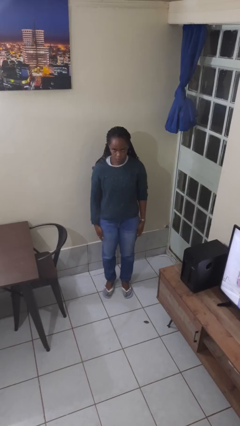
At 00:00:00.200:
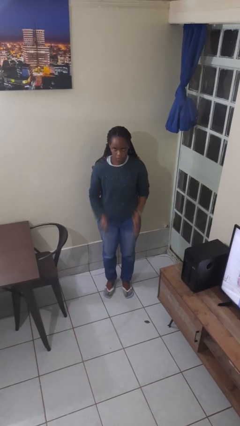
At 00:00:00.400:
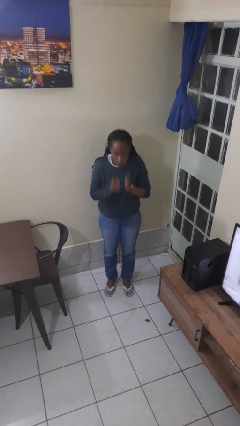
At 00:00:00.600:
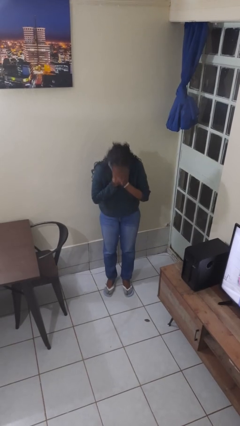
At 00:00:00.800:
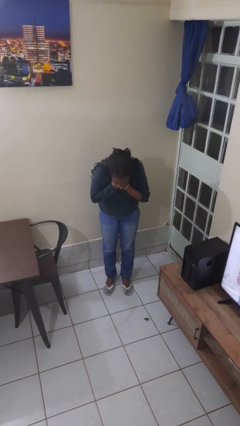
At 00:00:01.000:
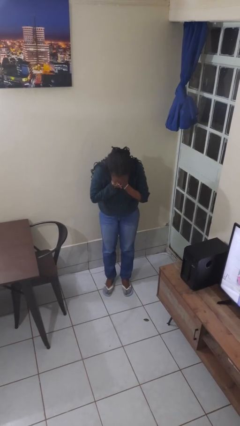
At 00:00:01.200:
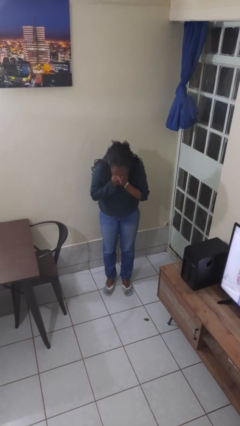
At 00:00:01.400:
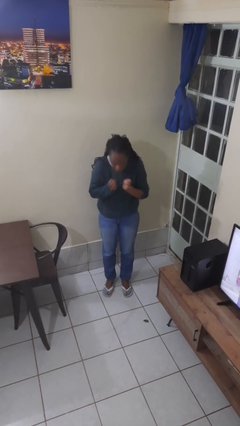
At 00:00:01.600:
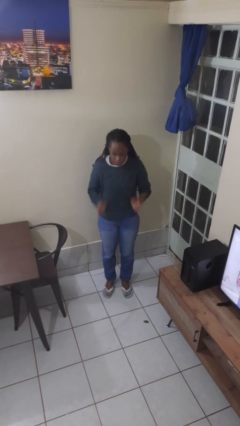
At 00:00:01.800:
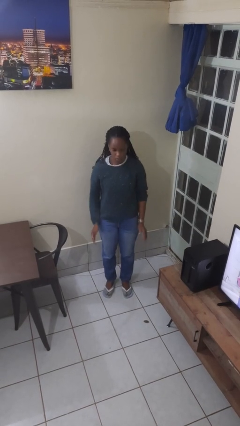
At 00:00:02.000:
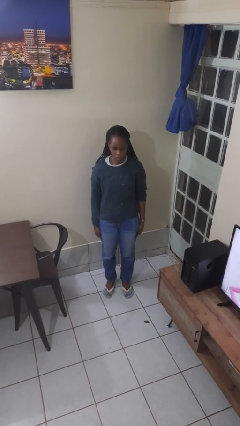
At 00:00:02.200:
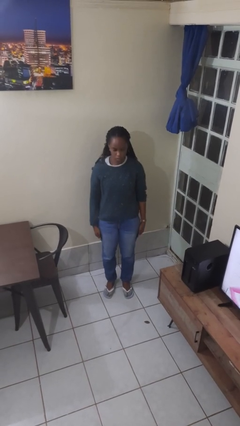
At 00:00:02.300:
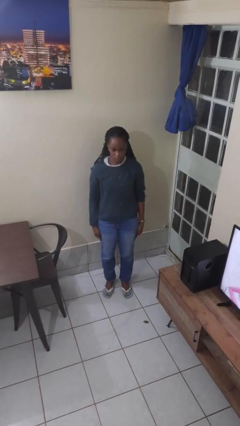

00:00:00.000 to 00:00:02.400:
person sneezes into hand

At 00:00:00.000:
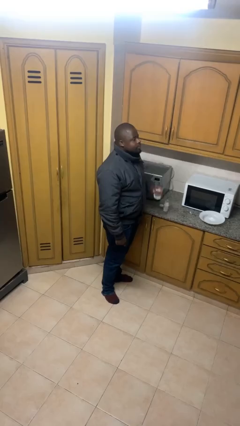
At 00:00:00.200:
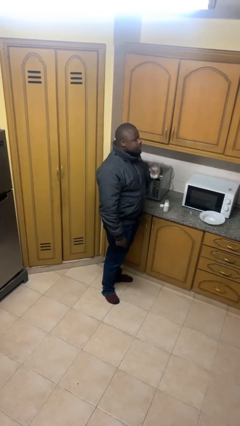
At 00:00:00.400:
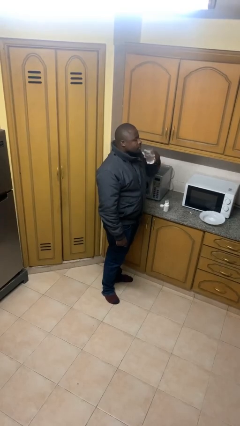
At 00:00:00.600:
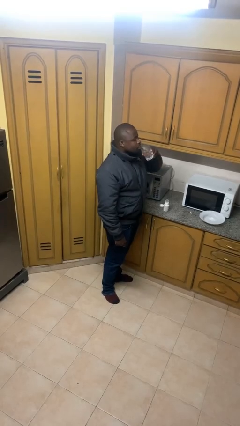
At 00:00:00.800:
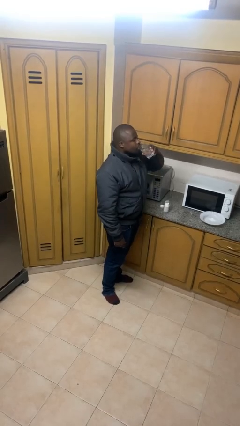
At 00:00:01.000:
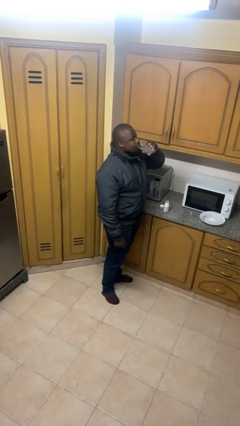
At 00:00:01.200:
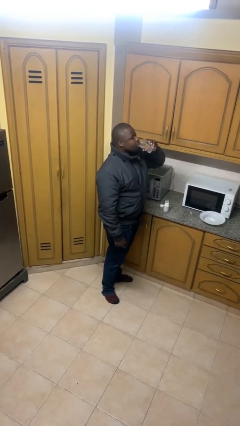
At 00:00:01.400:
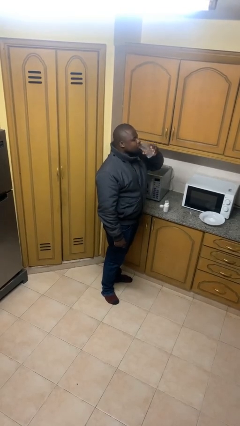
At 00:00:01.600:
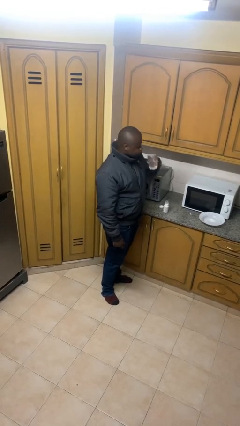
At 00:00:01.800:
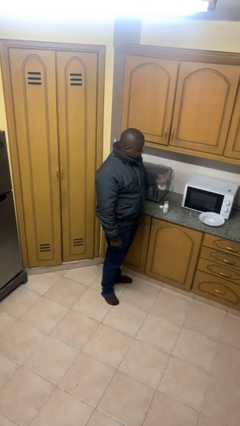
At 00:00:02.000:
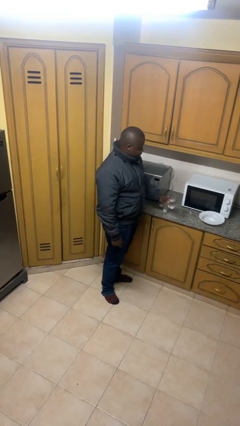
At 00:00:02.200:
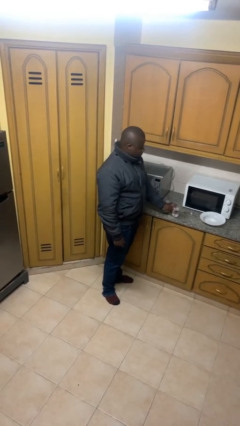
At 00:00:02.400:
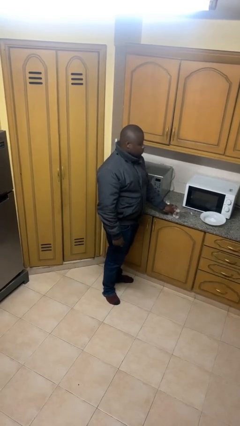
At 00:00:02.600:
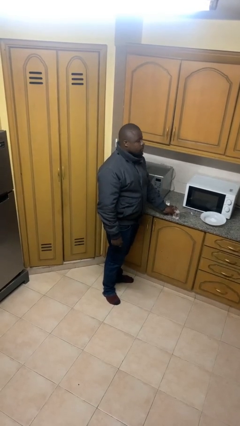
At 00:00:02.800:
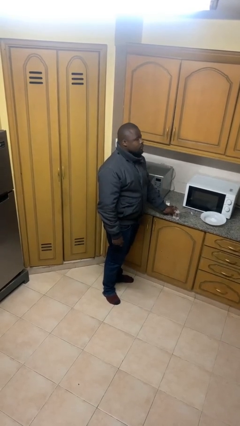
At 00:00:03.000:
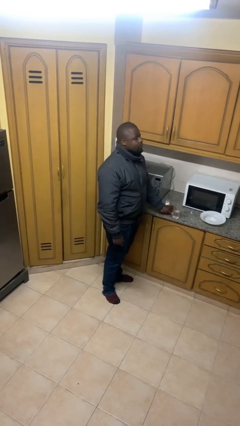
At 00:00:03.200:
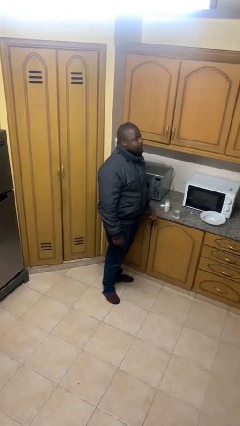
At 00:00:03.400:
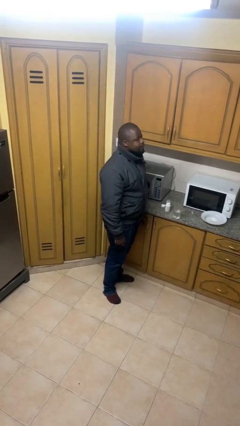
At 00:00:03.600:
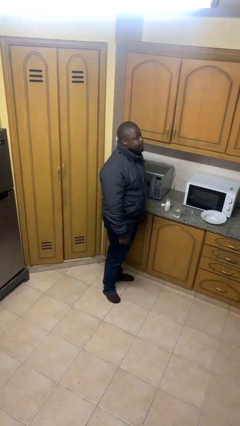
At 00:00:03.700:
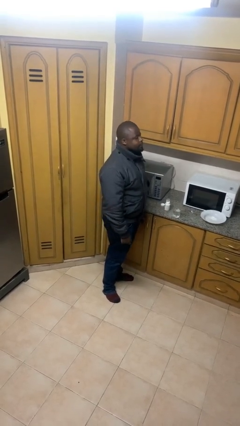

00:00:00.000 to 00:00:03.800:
person drinks from cup

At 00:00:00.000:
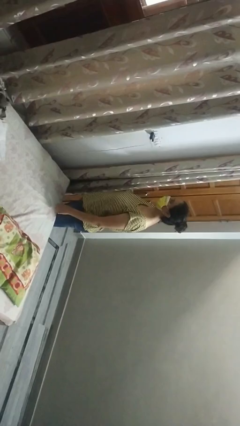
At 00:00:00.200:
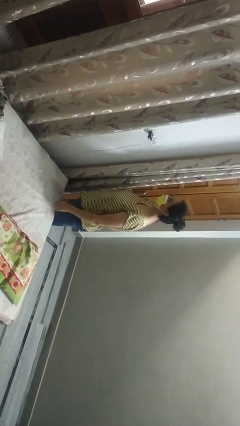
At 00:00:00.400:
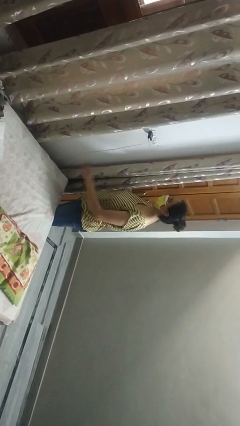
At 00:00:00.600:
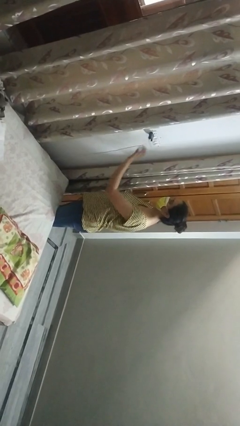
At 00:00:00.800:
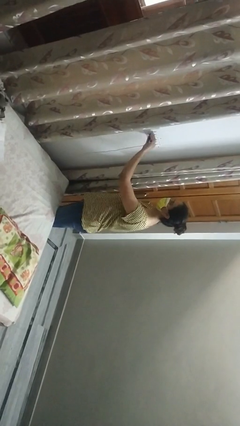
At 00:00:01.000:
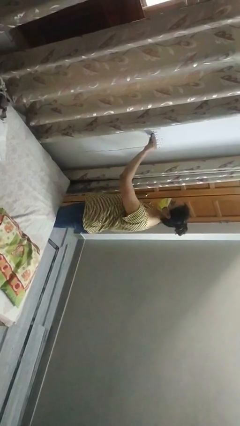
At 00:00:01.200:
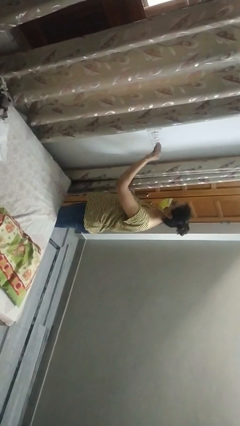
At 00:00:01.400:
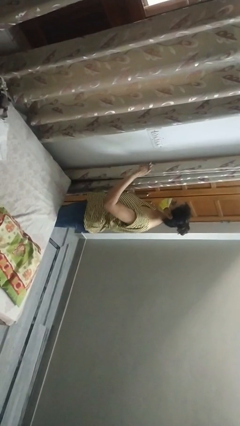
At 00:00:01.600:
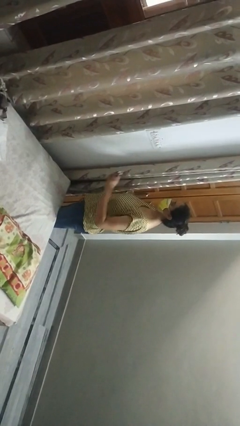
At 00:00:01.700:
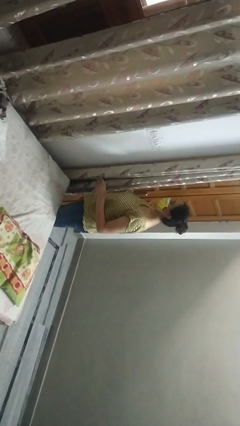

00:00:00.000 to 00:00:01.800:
person unplugs from electrical socket

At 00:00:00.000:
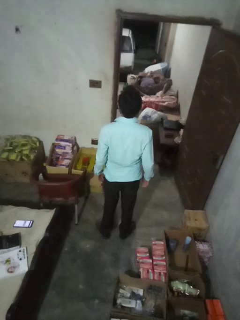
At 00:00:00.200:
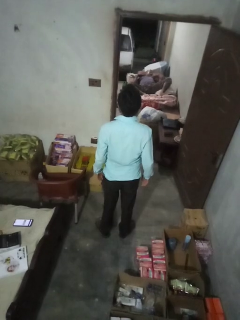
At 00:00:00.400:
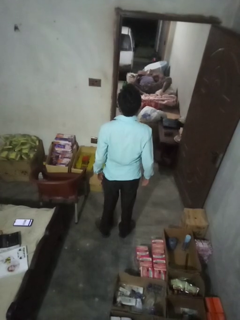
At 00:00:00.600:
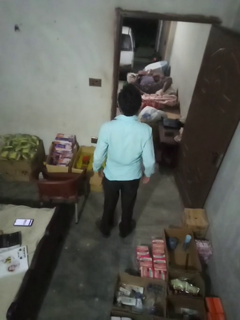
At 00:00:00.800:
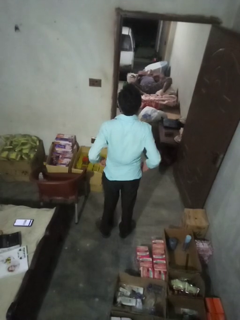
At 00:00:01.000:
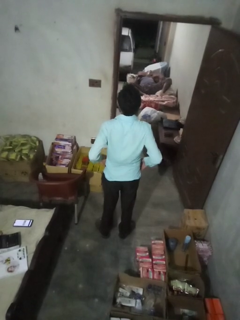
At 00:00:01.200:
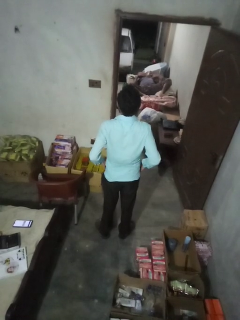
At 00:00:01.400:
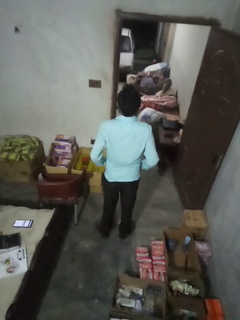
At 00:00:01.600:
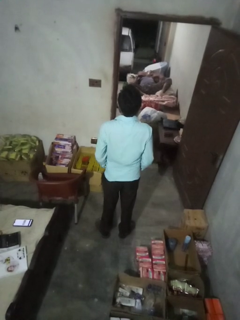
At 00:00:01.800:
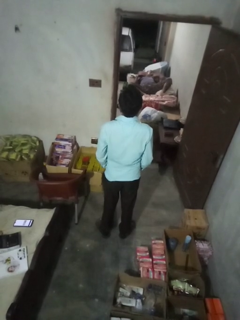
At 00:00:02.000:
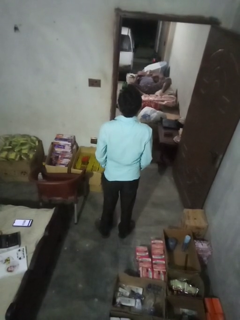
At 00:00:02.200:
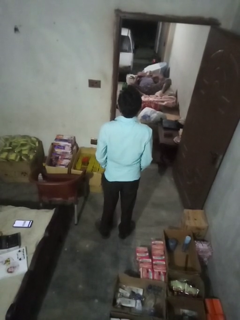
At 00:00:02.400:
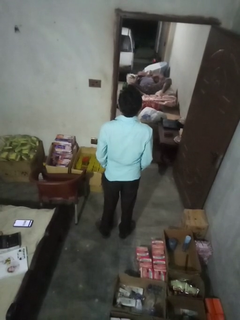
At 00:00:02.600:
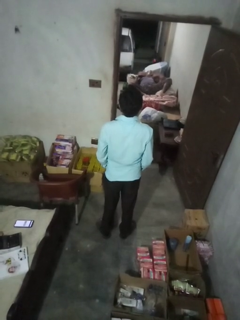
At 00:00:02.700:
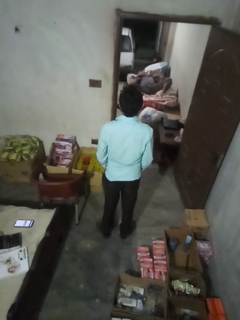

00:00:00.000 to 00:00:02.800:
person puts hands in back pockets

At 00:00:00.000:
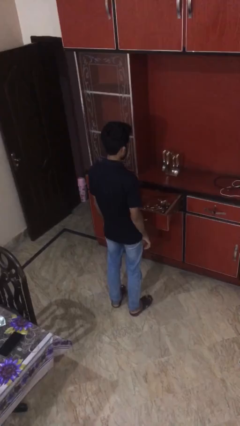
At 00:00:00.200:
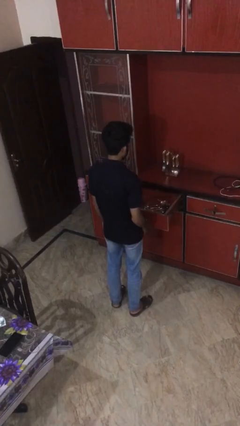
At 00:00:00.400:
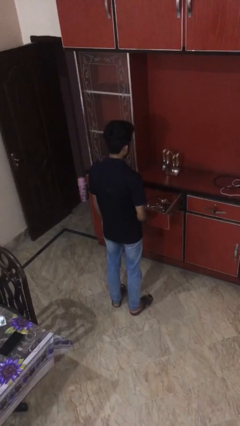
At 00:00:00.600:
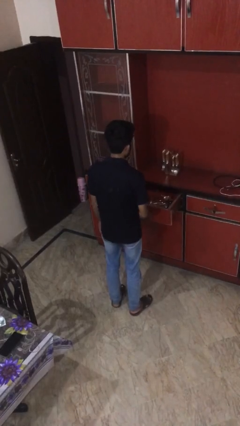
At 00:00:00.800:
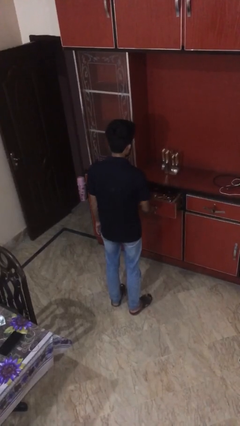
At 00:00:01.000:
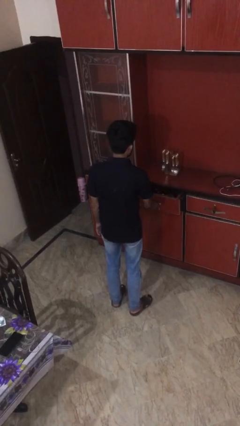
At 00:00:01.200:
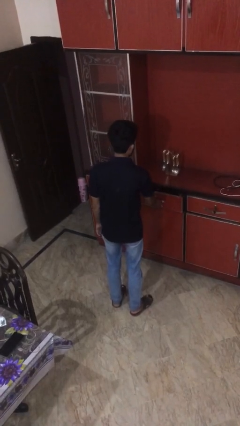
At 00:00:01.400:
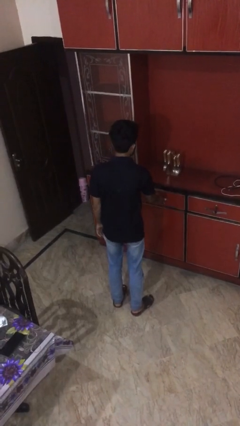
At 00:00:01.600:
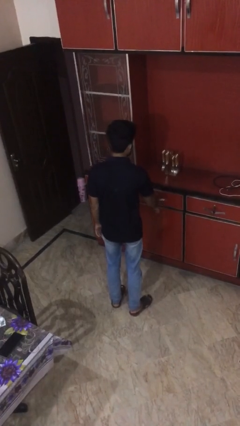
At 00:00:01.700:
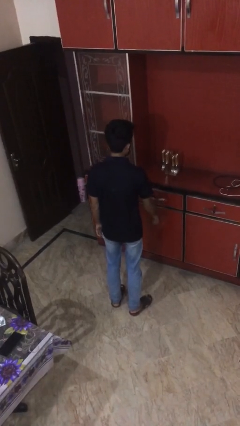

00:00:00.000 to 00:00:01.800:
person closes kitchen drawer

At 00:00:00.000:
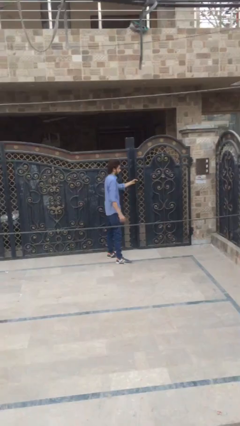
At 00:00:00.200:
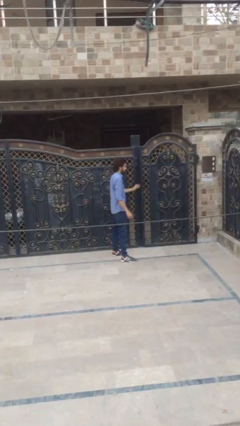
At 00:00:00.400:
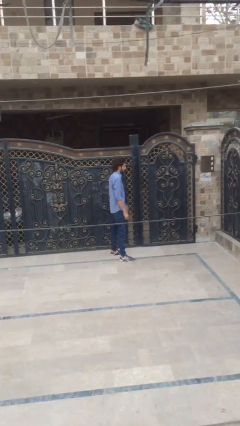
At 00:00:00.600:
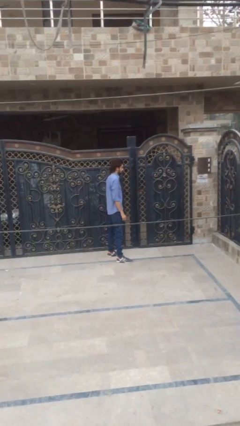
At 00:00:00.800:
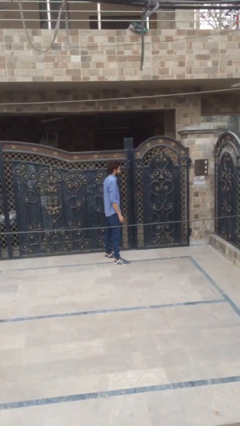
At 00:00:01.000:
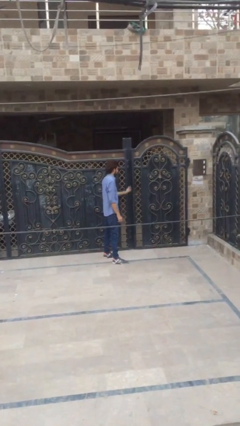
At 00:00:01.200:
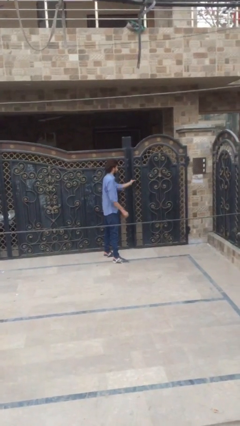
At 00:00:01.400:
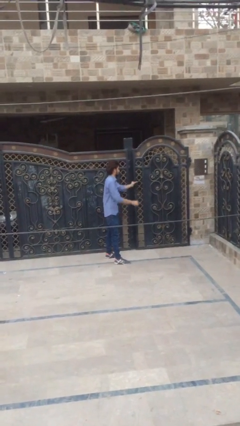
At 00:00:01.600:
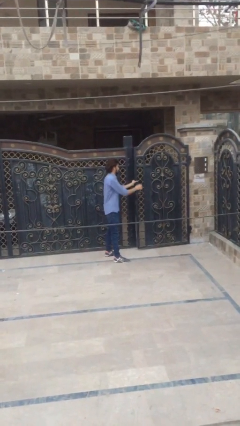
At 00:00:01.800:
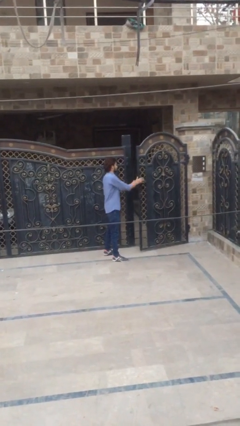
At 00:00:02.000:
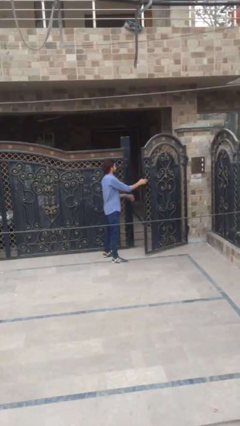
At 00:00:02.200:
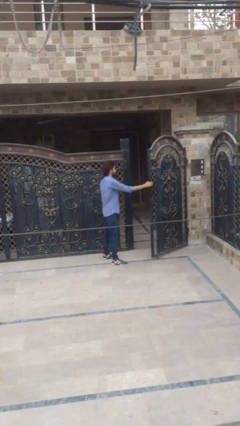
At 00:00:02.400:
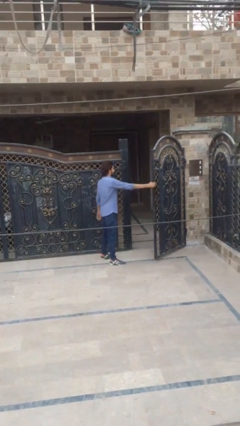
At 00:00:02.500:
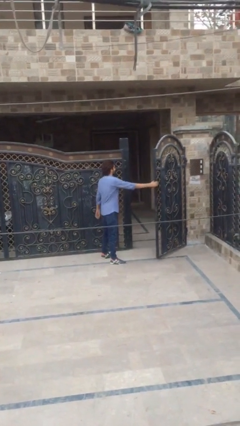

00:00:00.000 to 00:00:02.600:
person opens facility door

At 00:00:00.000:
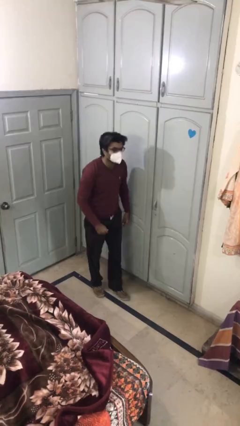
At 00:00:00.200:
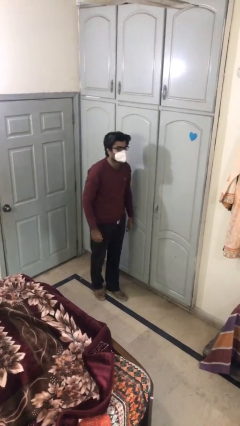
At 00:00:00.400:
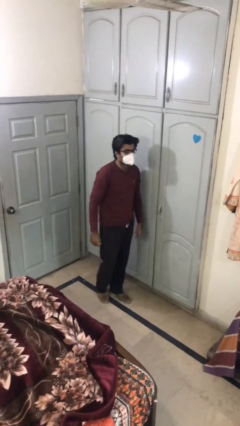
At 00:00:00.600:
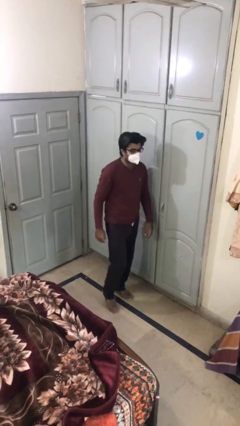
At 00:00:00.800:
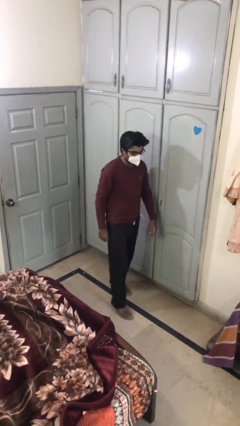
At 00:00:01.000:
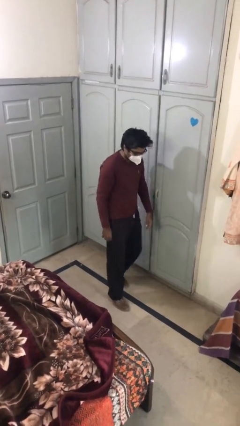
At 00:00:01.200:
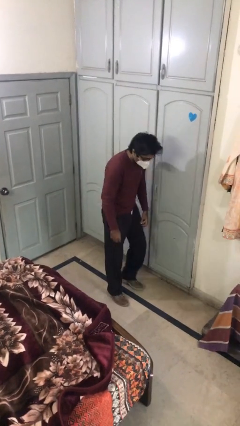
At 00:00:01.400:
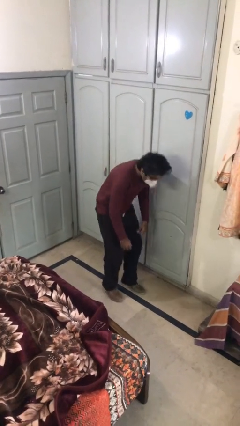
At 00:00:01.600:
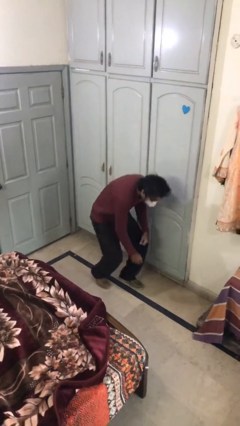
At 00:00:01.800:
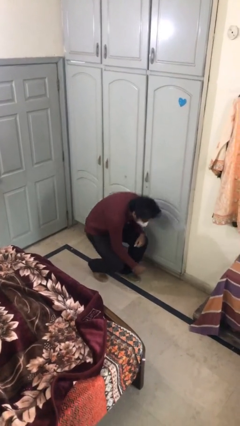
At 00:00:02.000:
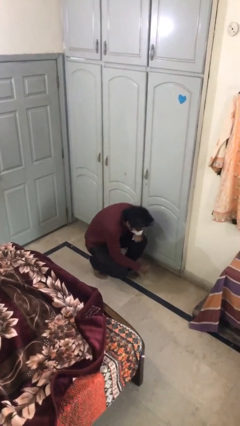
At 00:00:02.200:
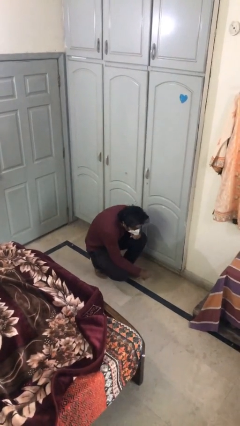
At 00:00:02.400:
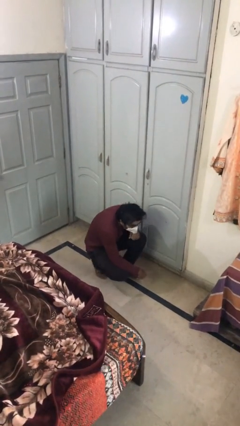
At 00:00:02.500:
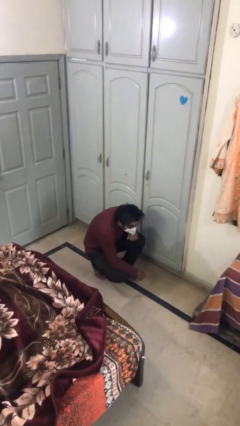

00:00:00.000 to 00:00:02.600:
person sits down
